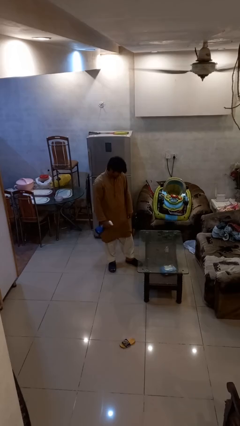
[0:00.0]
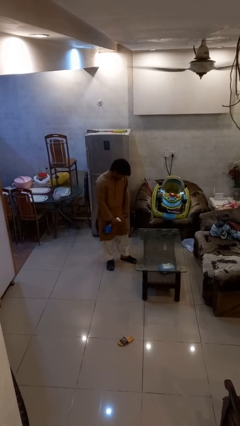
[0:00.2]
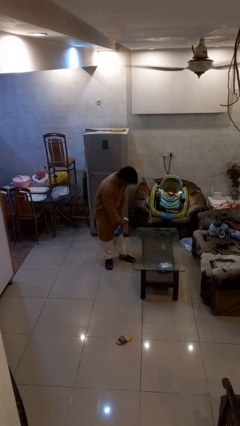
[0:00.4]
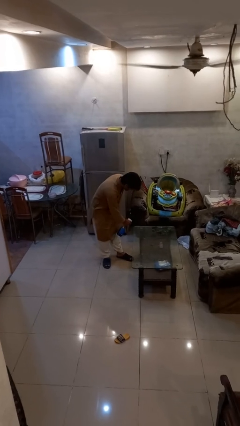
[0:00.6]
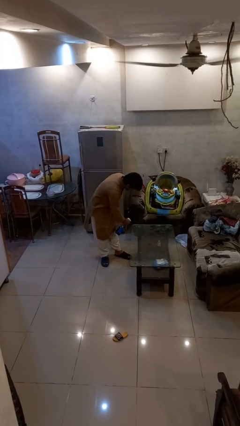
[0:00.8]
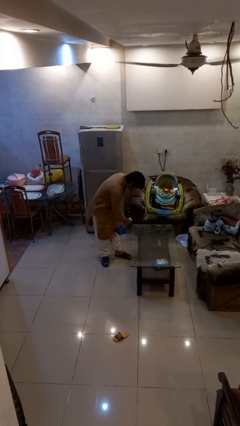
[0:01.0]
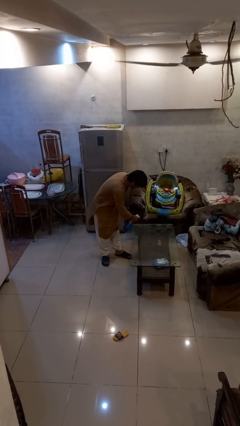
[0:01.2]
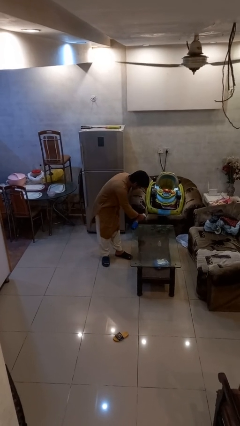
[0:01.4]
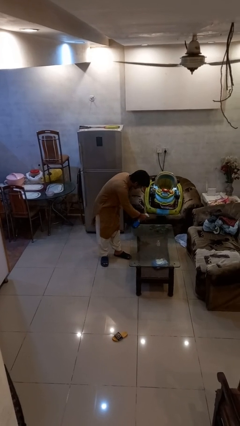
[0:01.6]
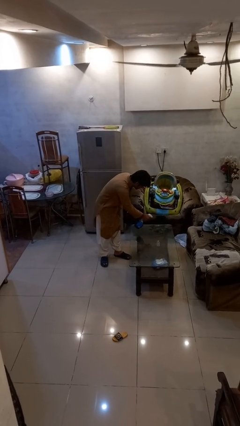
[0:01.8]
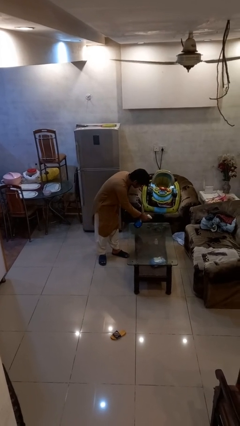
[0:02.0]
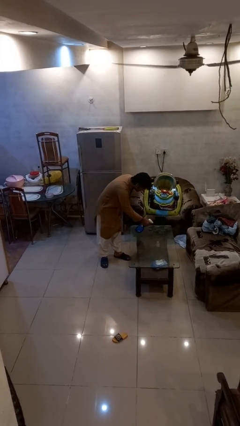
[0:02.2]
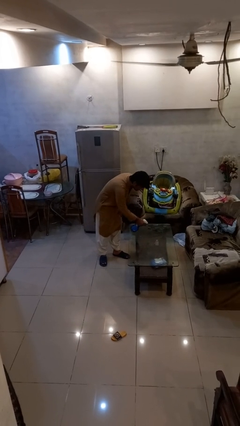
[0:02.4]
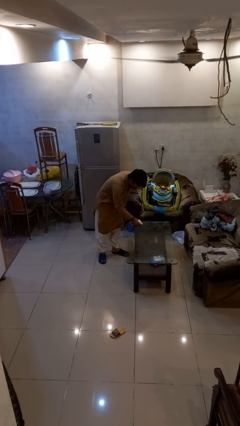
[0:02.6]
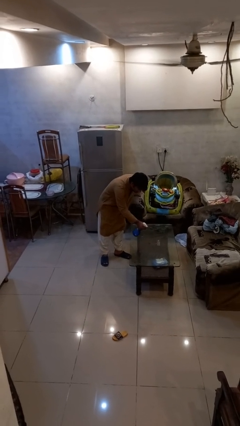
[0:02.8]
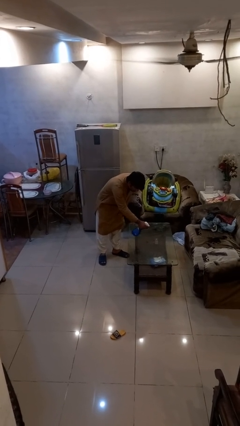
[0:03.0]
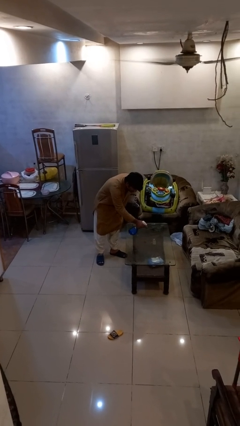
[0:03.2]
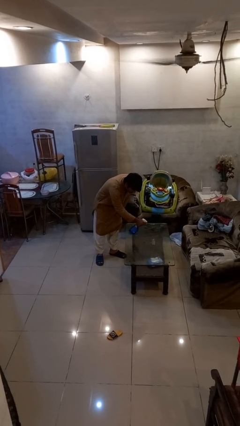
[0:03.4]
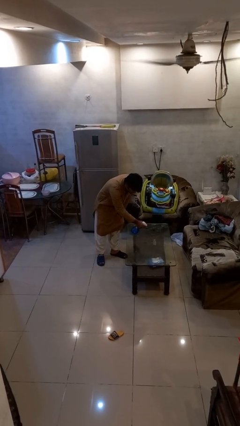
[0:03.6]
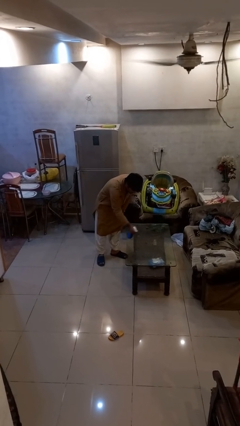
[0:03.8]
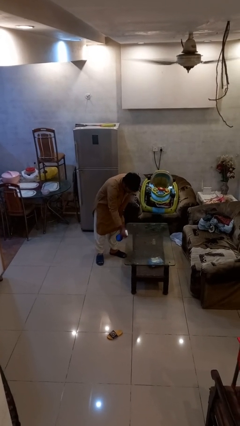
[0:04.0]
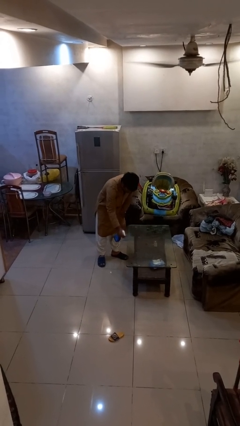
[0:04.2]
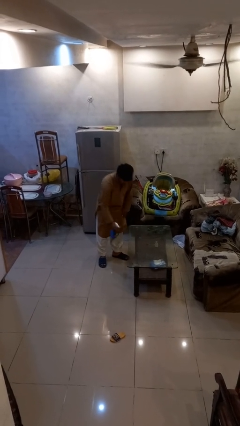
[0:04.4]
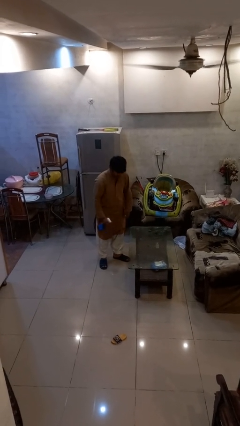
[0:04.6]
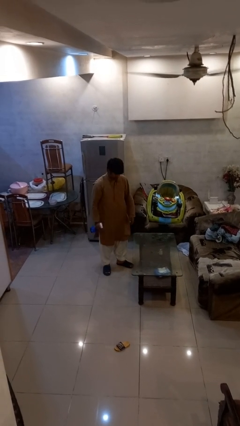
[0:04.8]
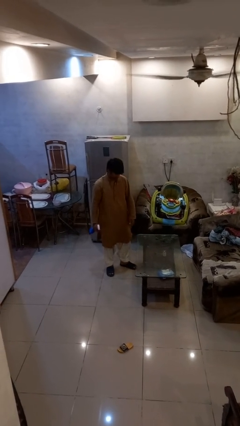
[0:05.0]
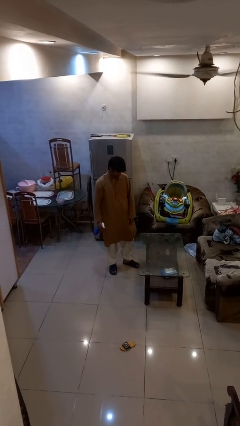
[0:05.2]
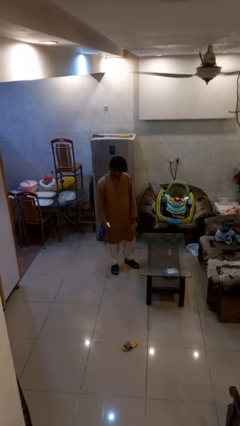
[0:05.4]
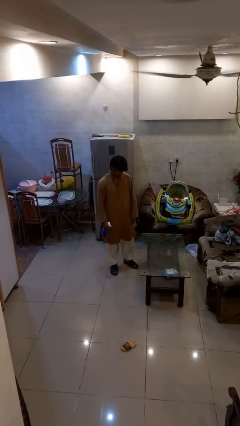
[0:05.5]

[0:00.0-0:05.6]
person sprays from bottle

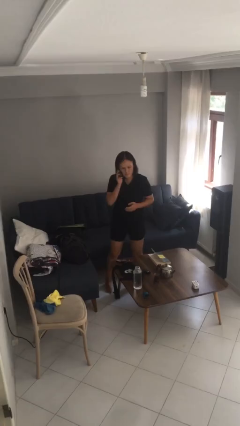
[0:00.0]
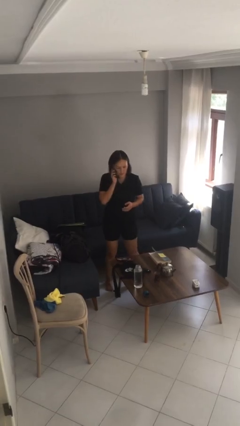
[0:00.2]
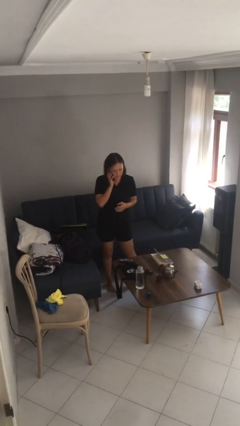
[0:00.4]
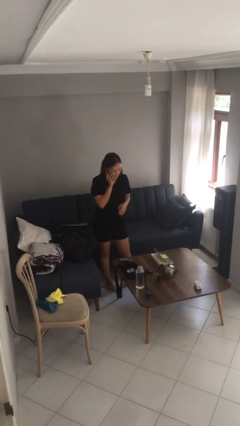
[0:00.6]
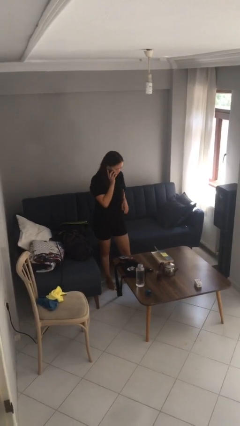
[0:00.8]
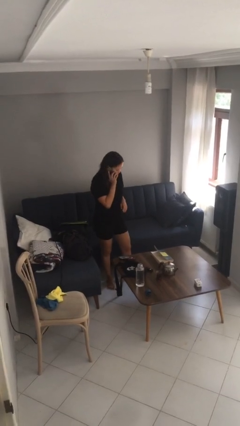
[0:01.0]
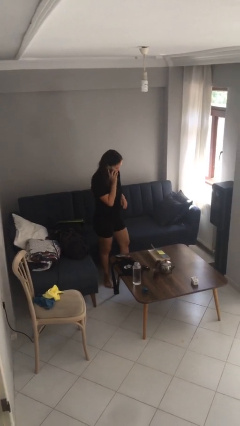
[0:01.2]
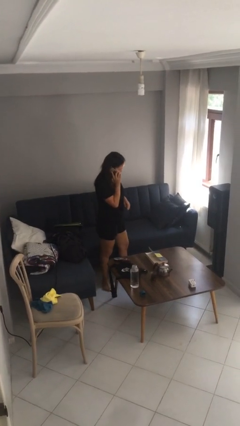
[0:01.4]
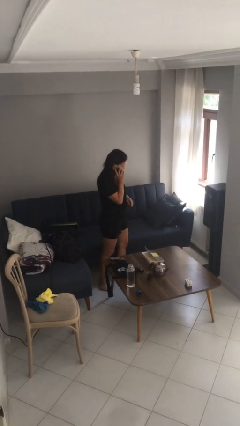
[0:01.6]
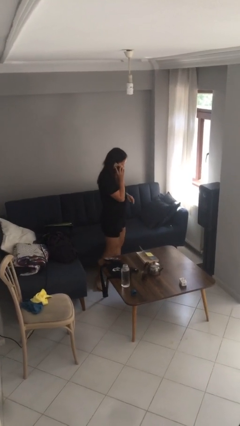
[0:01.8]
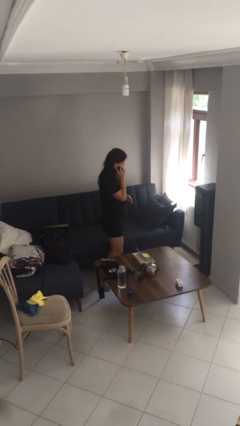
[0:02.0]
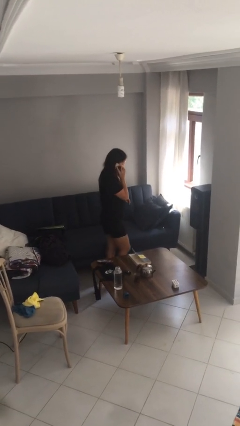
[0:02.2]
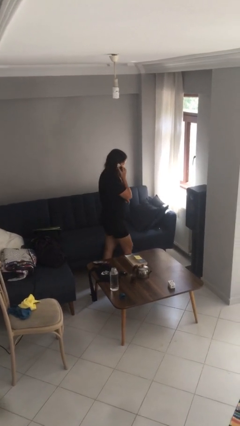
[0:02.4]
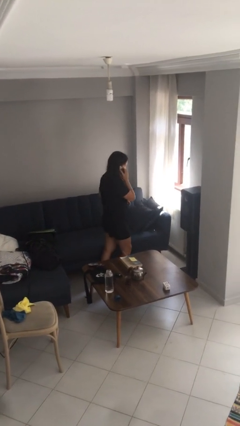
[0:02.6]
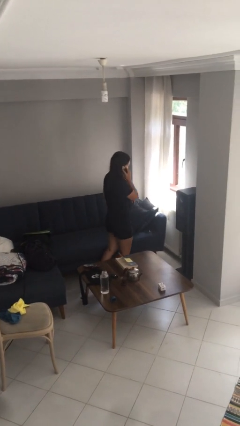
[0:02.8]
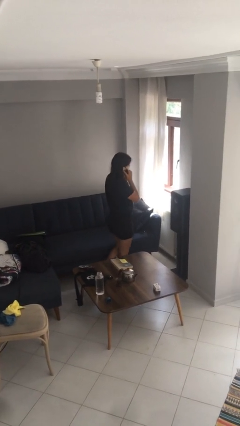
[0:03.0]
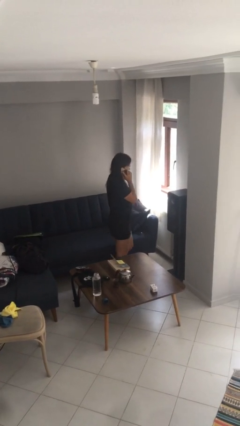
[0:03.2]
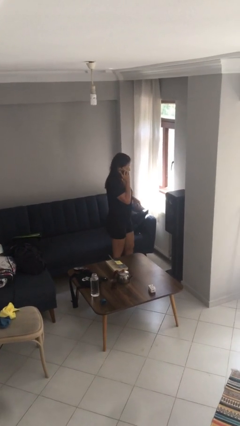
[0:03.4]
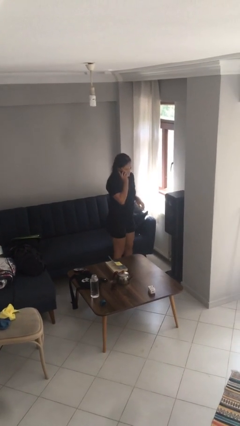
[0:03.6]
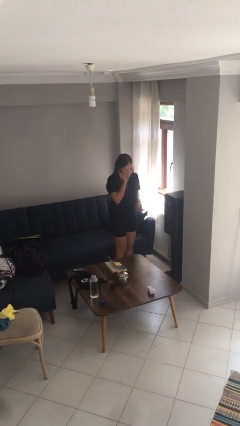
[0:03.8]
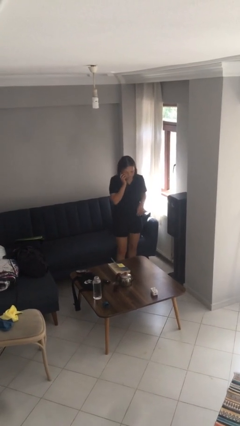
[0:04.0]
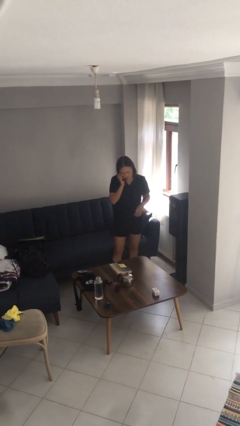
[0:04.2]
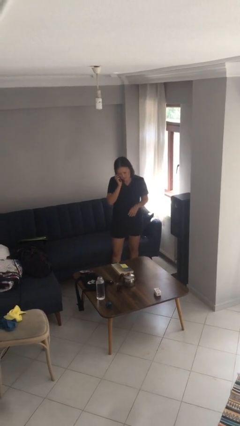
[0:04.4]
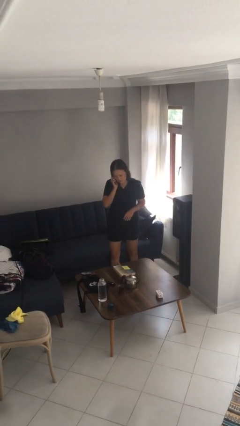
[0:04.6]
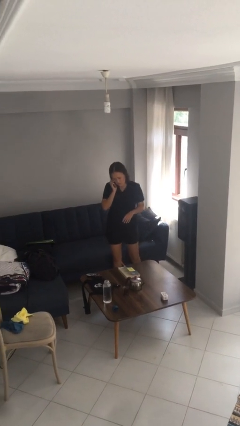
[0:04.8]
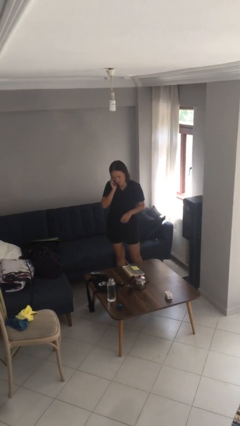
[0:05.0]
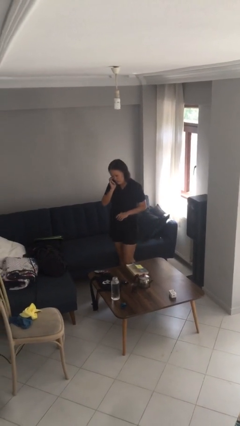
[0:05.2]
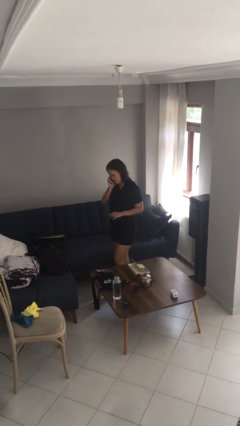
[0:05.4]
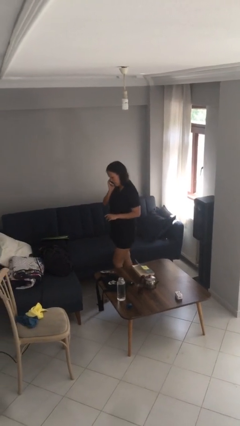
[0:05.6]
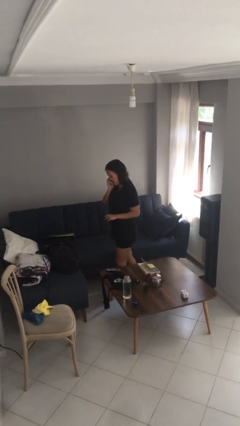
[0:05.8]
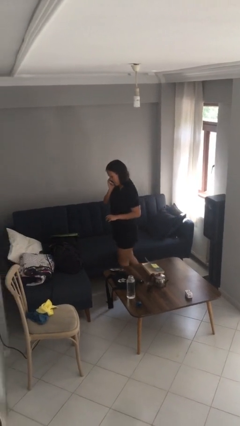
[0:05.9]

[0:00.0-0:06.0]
person talks on phone

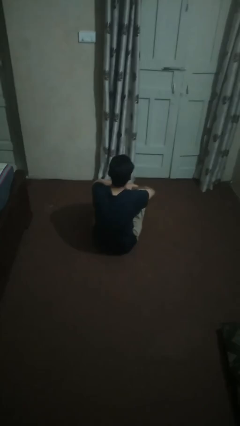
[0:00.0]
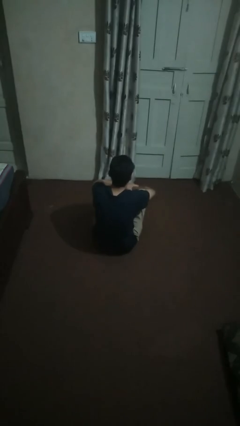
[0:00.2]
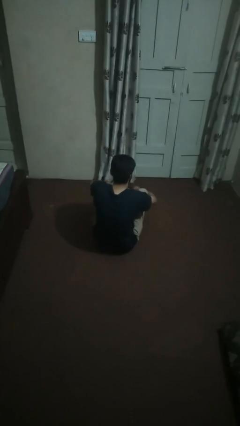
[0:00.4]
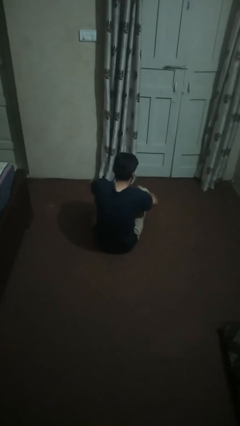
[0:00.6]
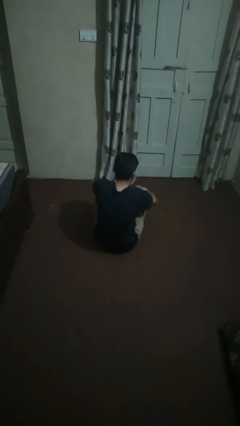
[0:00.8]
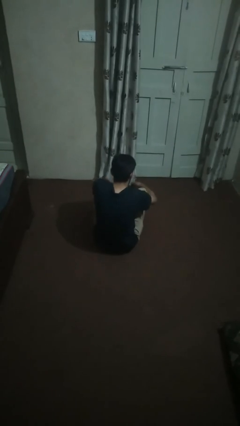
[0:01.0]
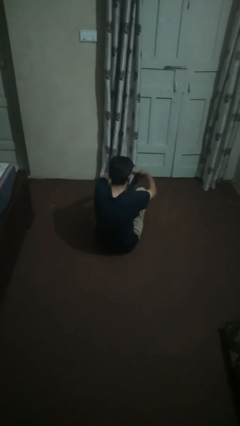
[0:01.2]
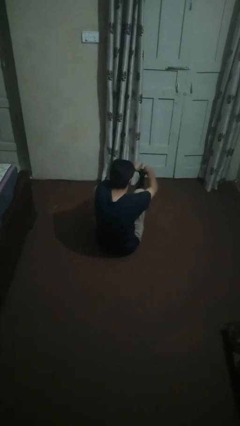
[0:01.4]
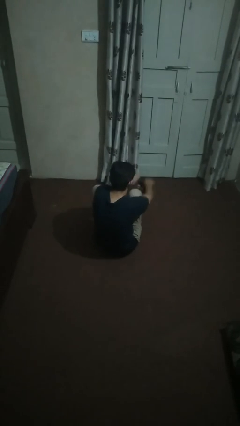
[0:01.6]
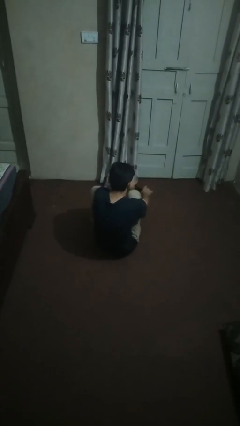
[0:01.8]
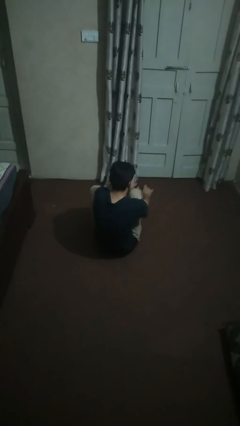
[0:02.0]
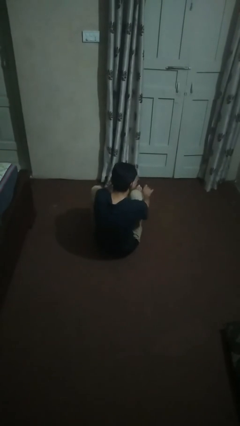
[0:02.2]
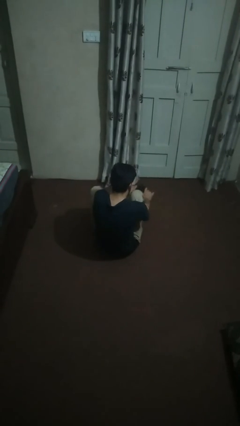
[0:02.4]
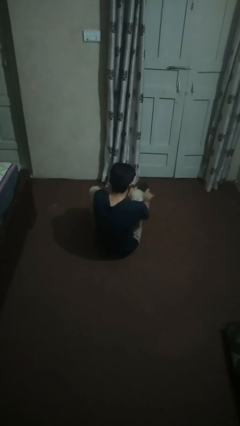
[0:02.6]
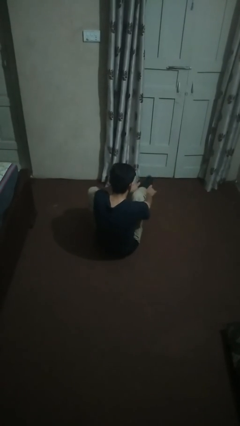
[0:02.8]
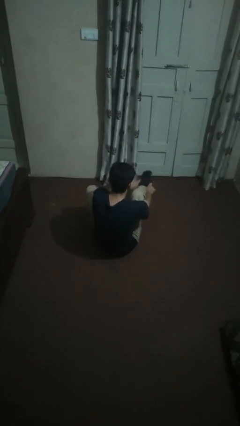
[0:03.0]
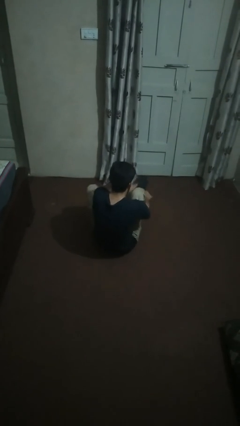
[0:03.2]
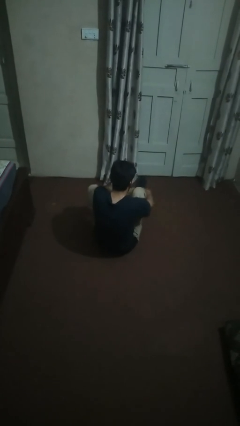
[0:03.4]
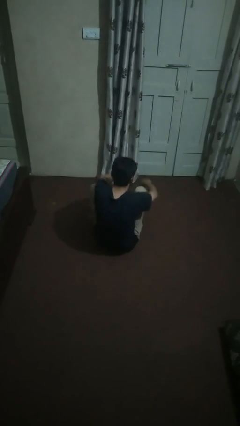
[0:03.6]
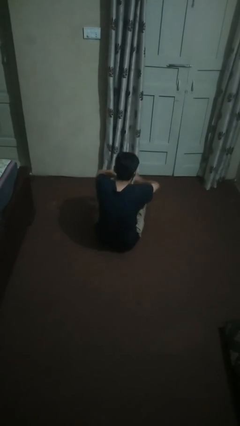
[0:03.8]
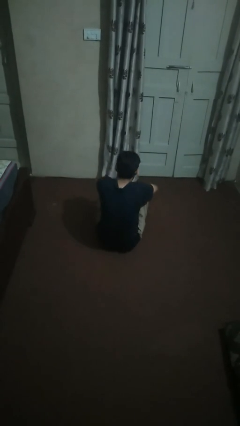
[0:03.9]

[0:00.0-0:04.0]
person puts on socks

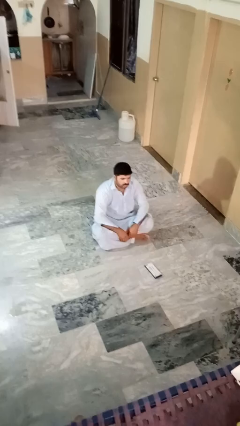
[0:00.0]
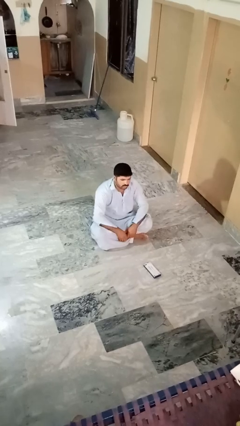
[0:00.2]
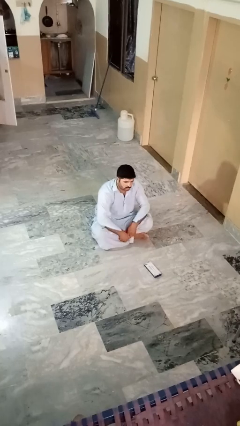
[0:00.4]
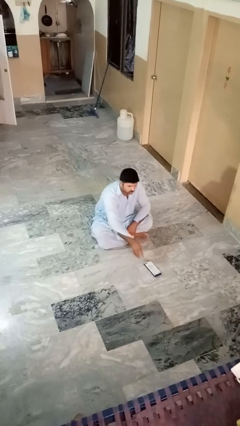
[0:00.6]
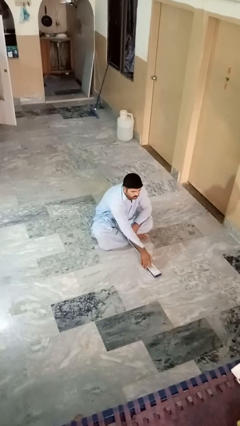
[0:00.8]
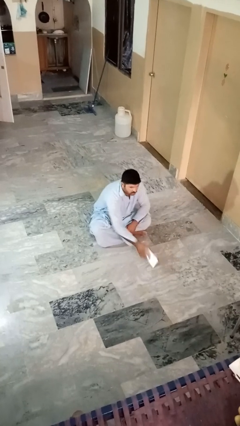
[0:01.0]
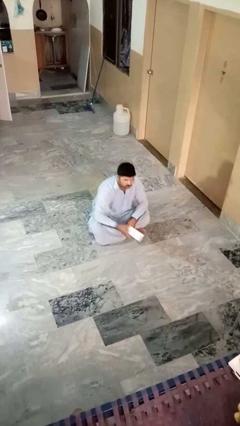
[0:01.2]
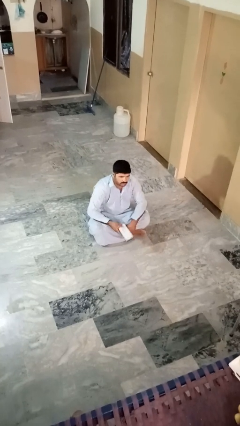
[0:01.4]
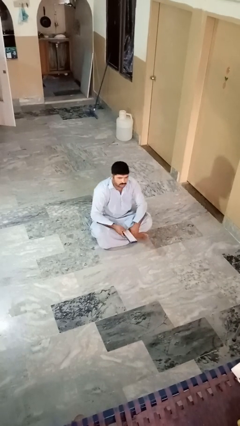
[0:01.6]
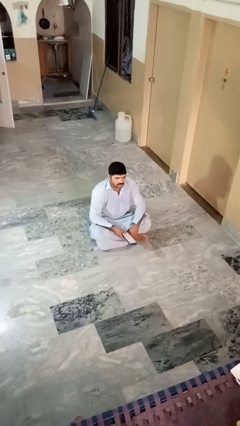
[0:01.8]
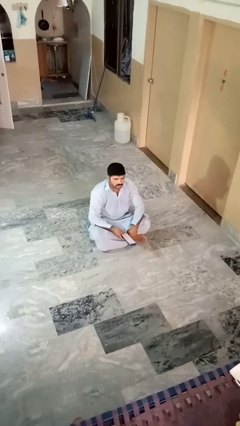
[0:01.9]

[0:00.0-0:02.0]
person picks up object from floor

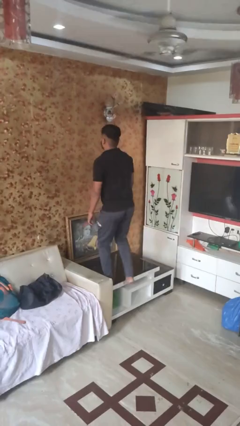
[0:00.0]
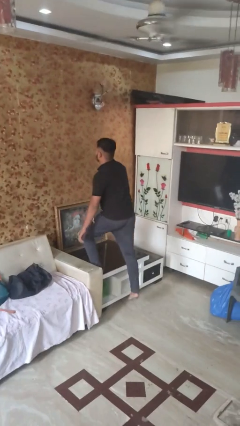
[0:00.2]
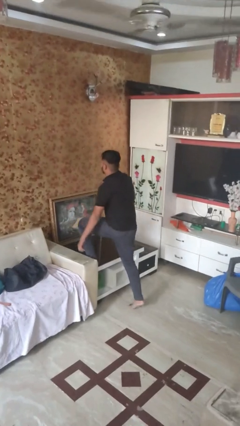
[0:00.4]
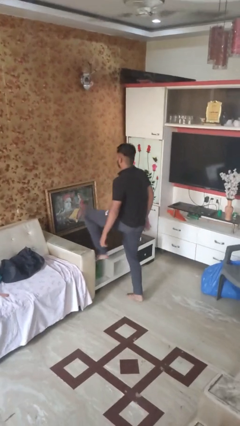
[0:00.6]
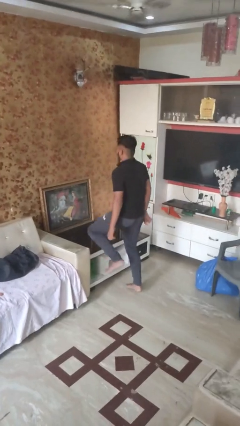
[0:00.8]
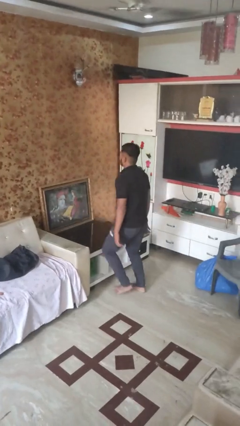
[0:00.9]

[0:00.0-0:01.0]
person climbs off table
